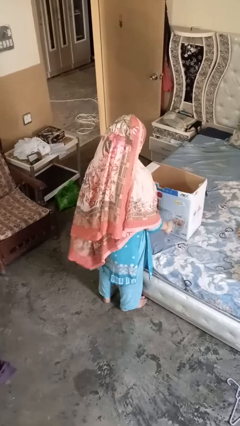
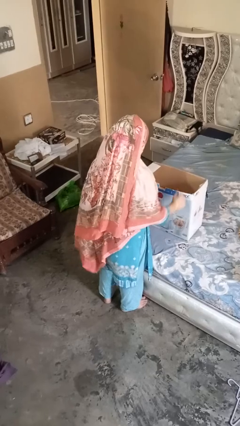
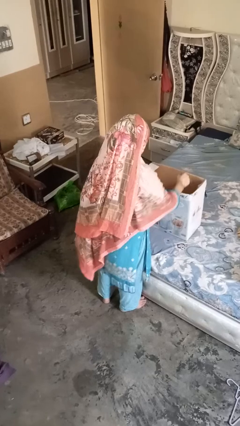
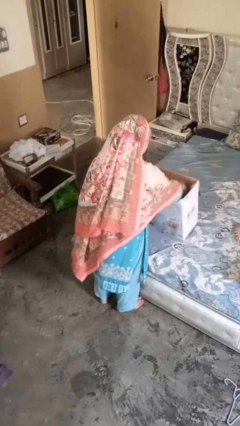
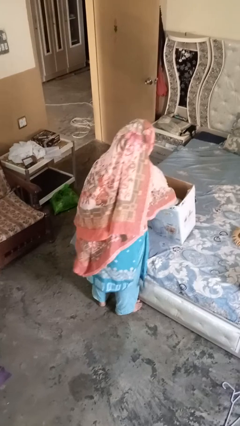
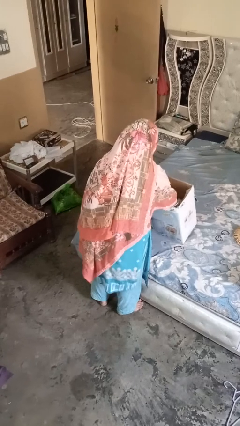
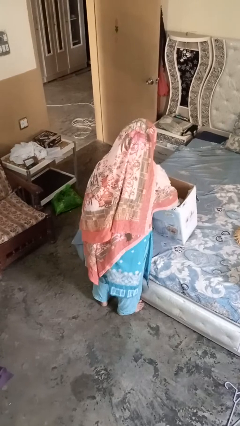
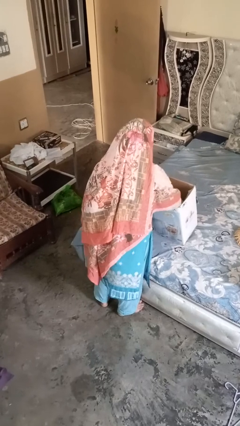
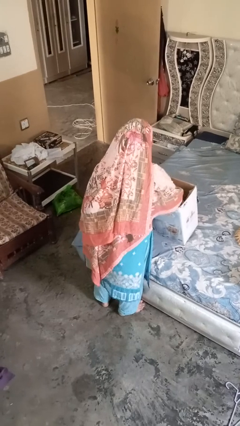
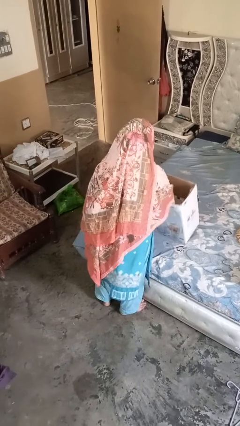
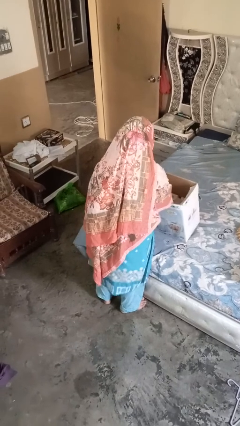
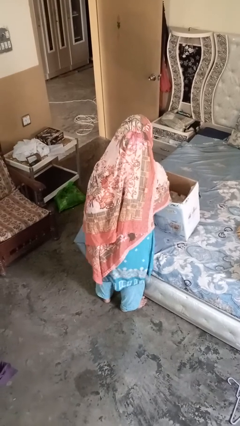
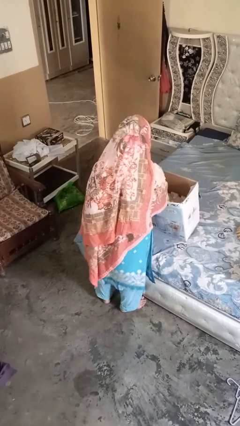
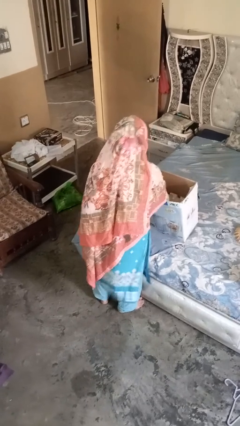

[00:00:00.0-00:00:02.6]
person searches in box

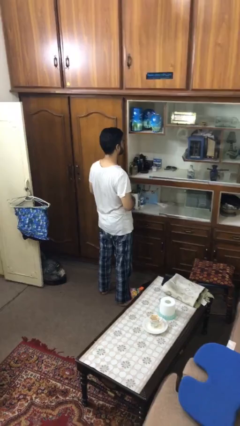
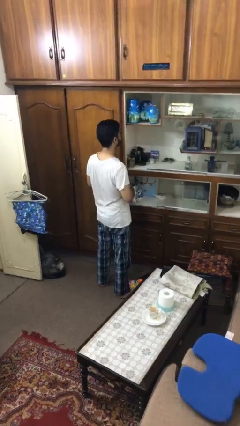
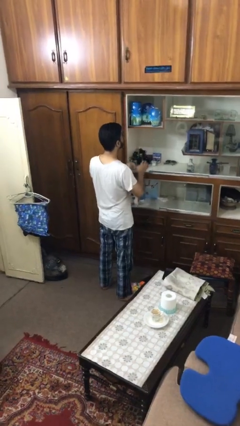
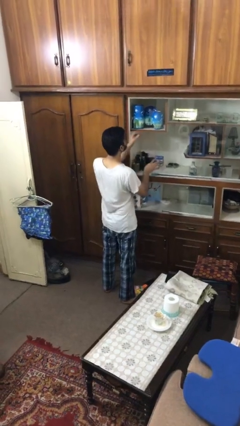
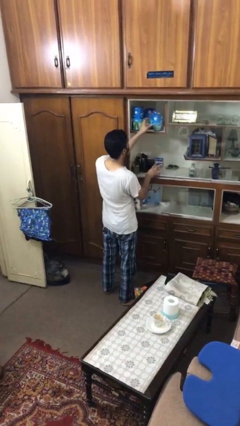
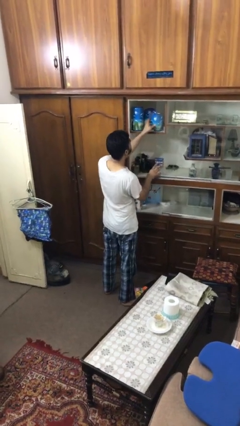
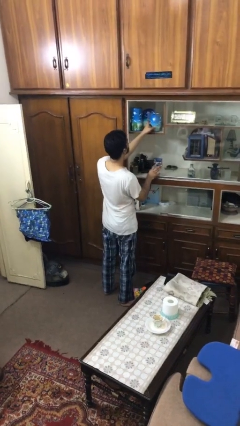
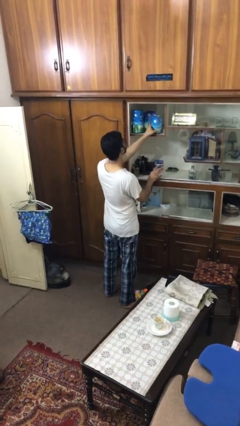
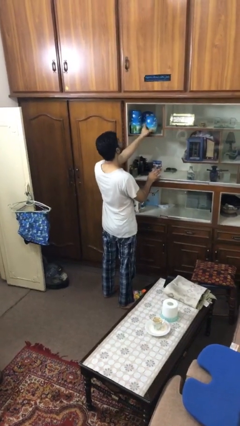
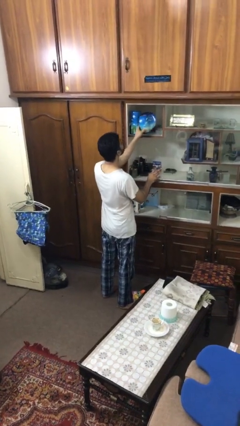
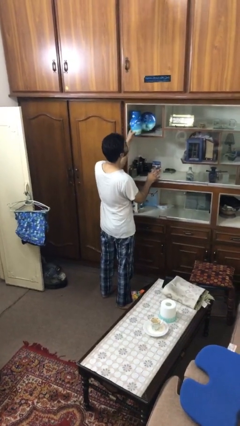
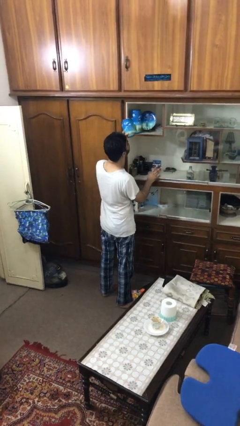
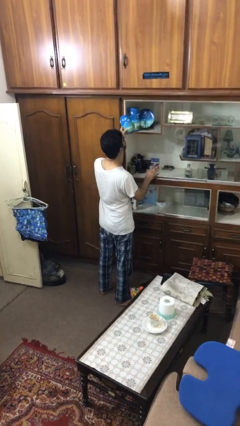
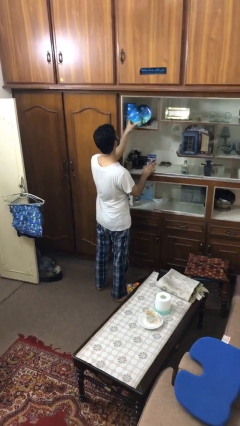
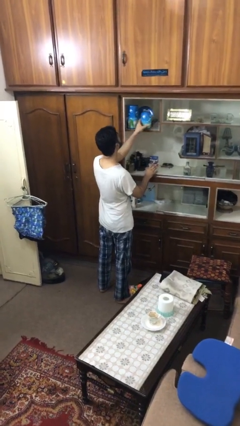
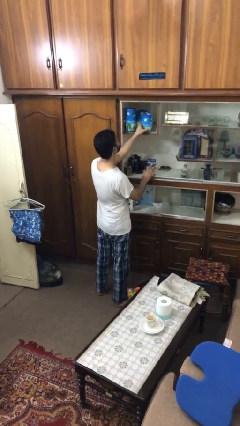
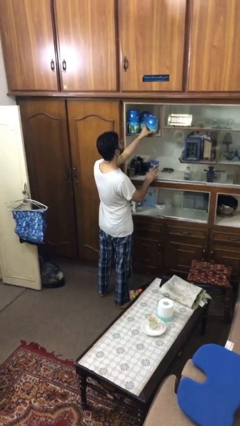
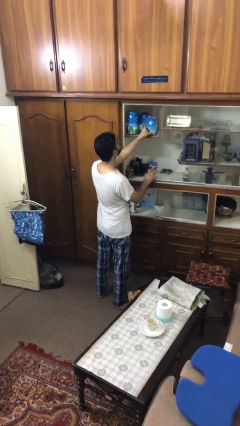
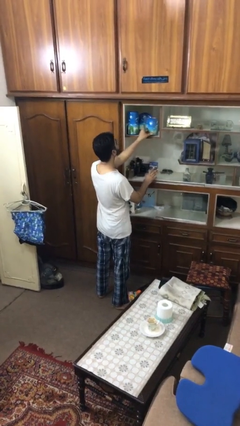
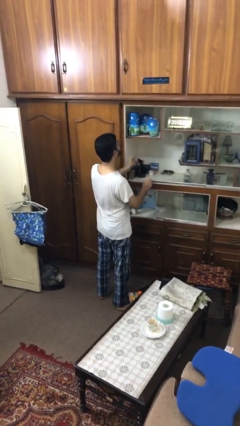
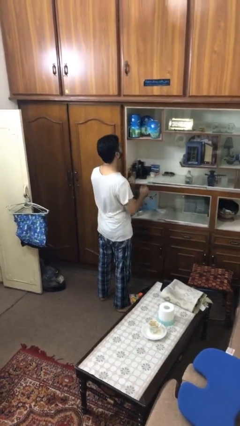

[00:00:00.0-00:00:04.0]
person searches in cabinet

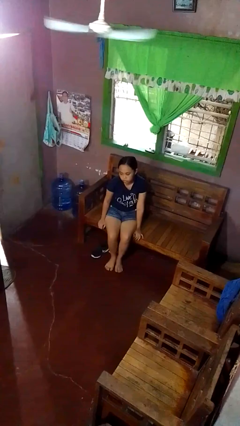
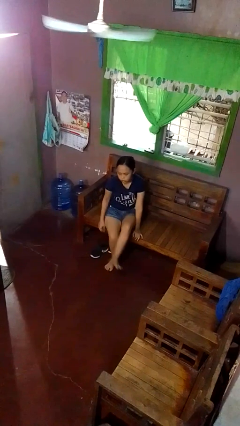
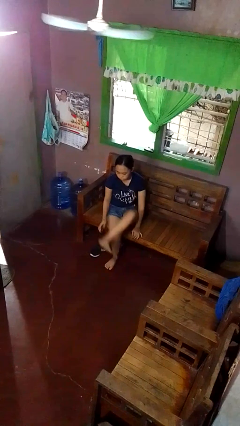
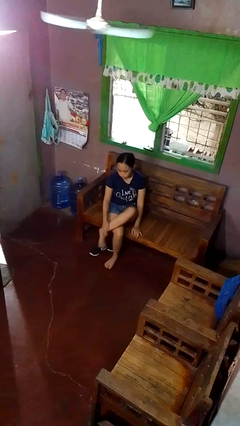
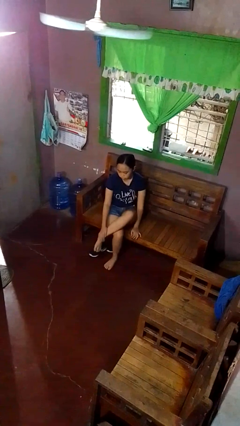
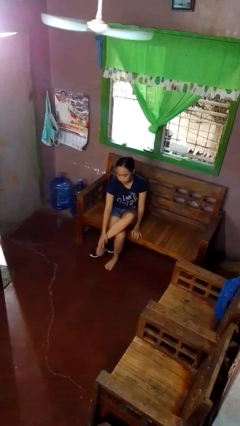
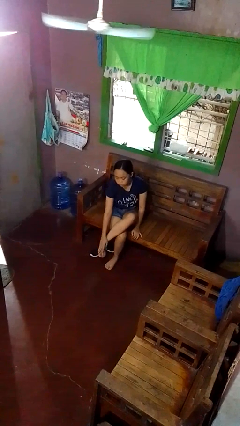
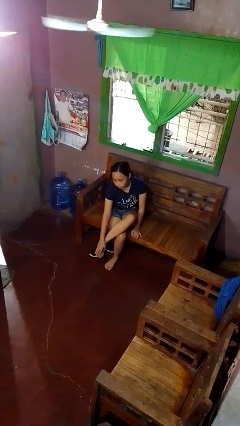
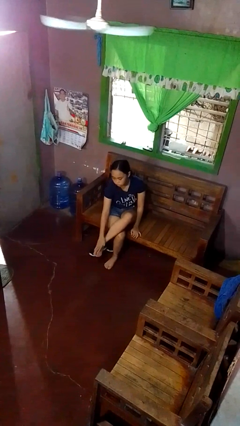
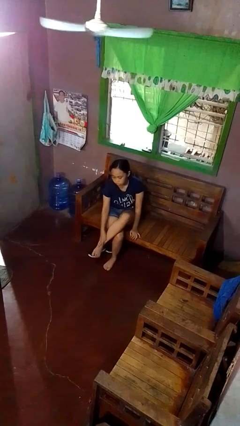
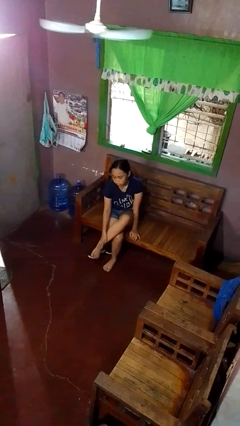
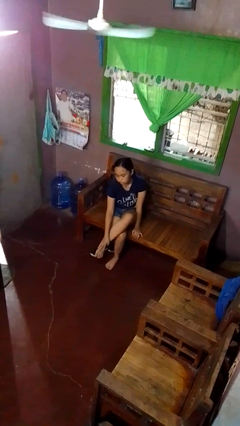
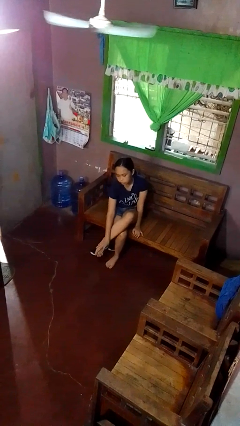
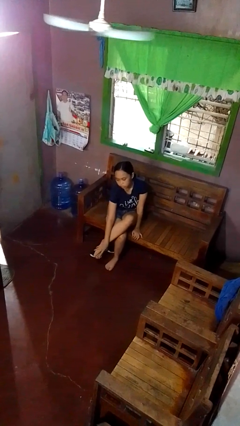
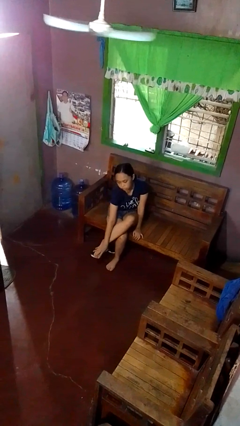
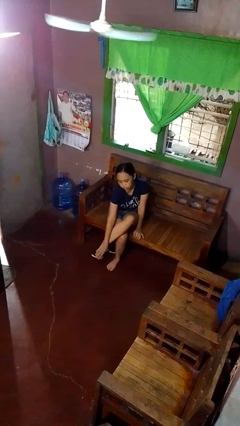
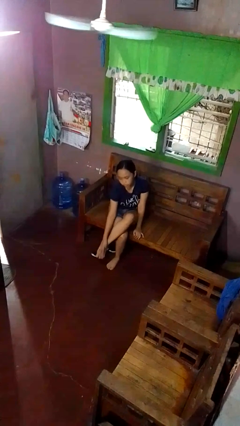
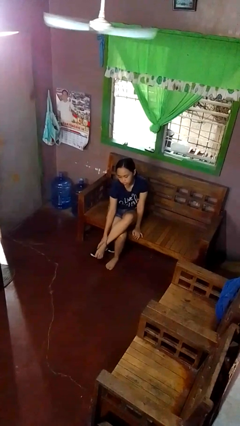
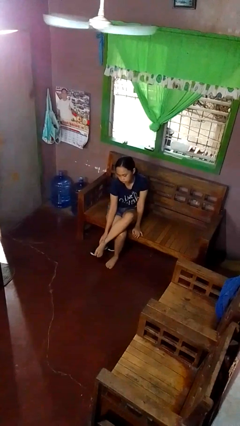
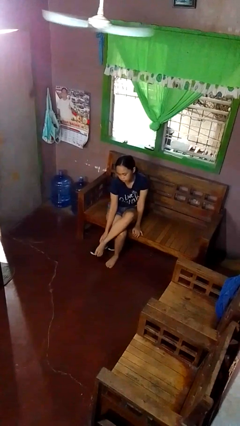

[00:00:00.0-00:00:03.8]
person rubs foot

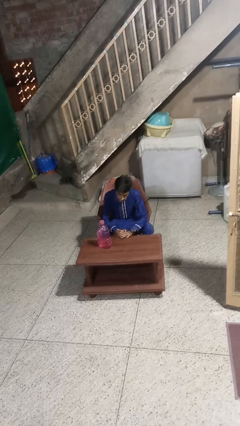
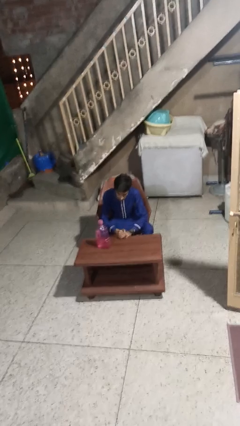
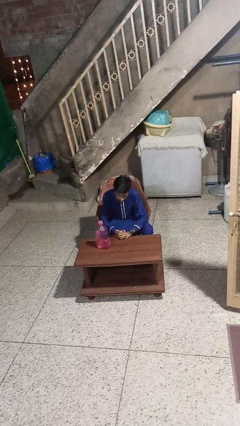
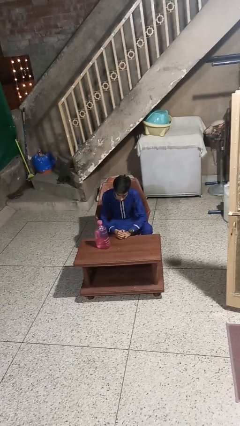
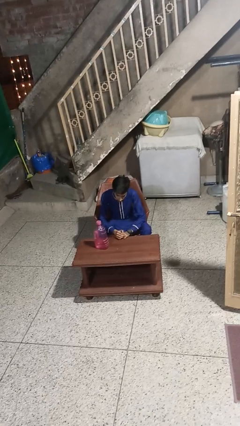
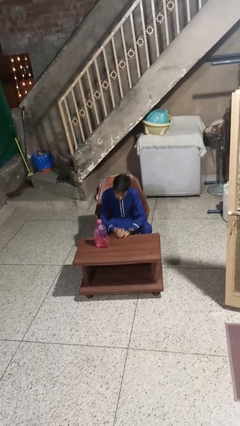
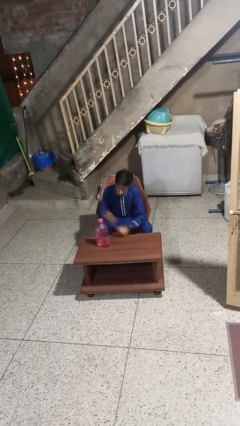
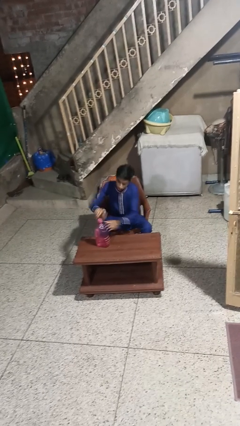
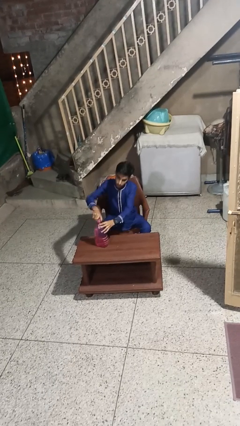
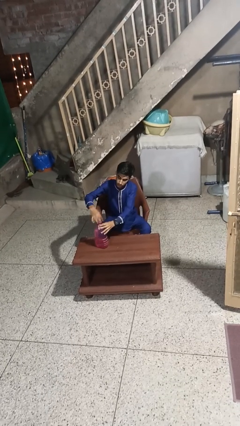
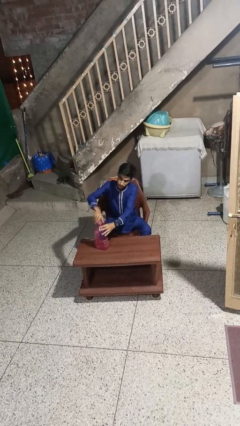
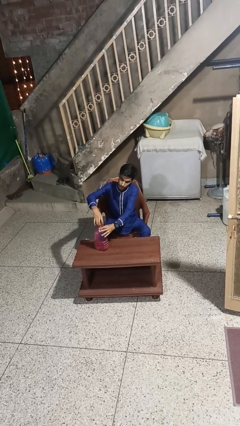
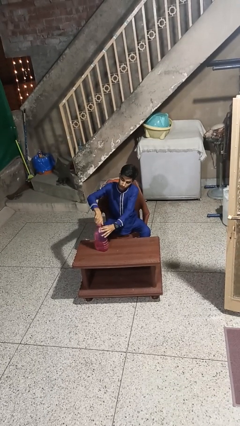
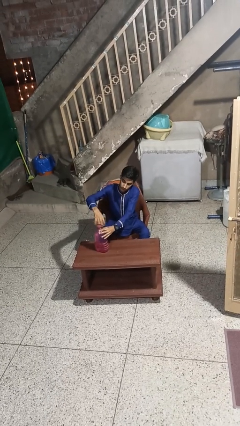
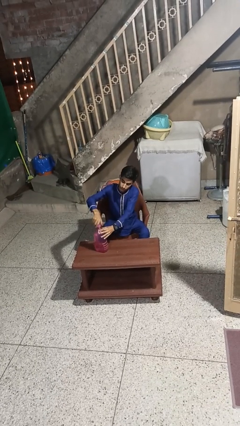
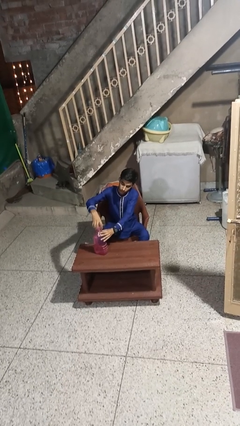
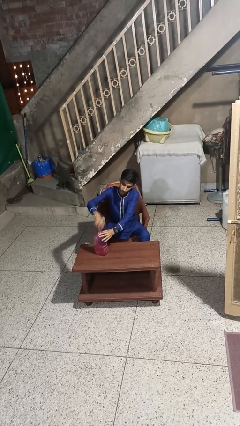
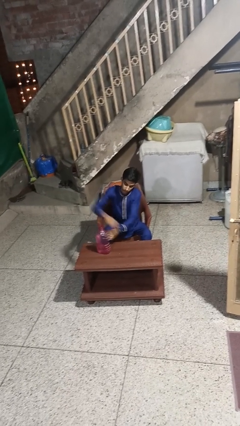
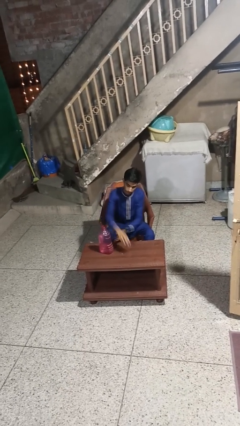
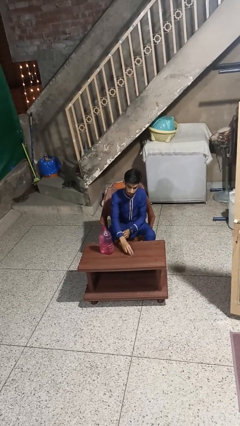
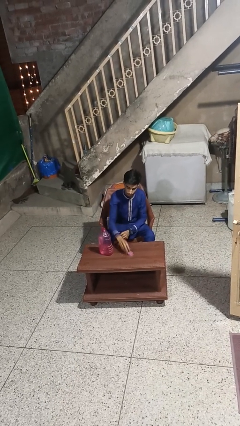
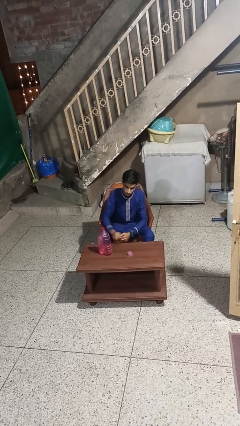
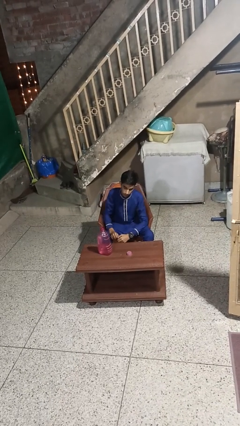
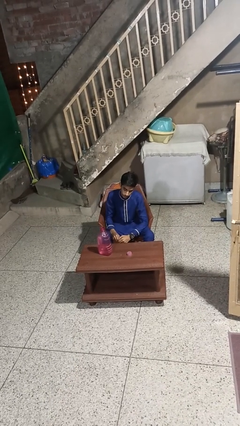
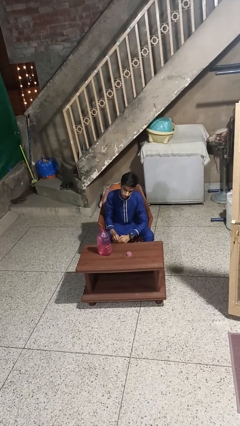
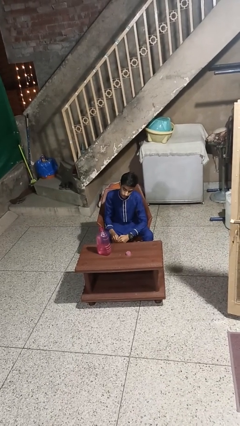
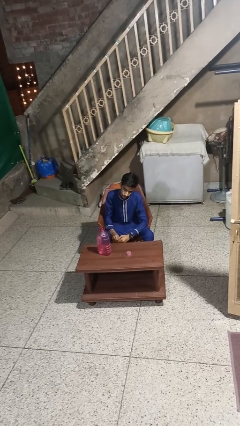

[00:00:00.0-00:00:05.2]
person unscrews lid from bottle

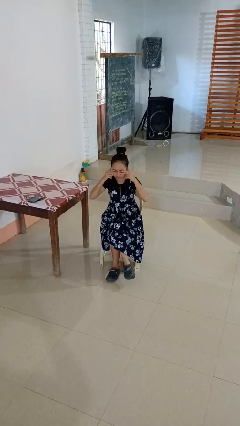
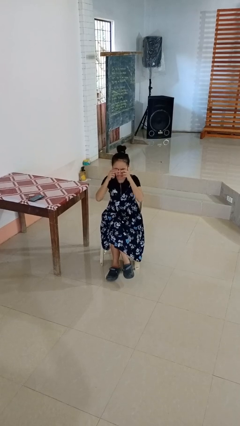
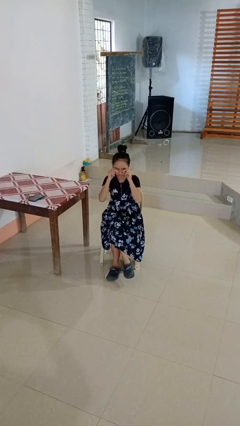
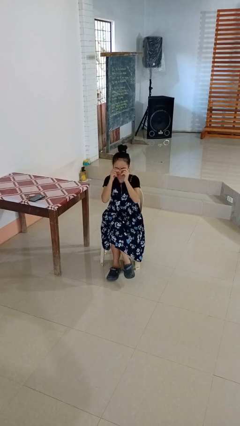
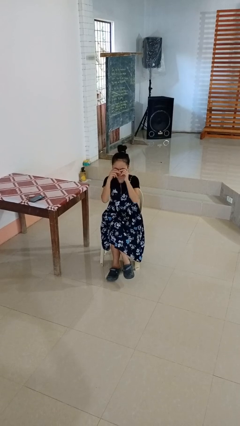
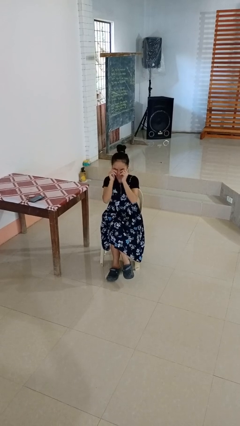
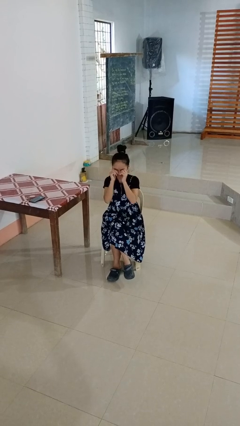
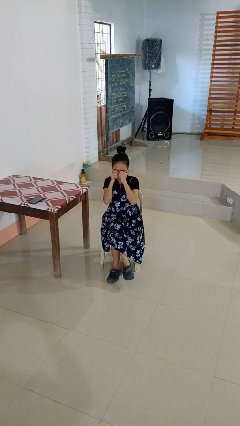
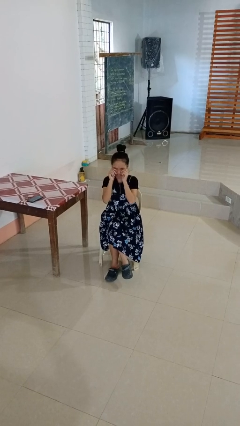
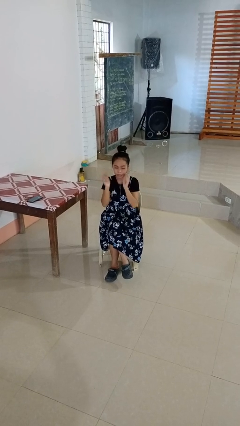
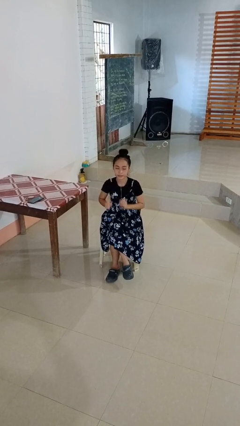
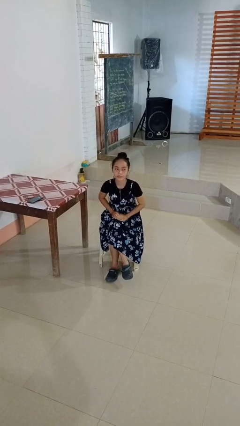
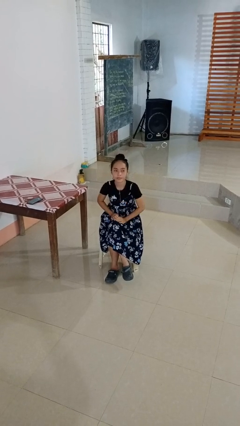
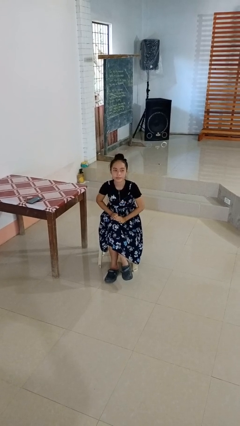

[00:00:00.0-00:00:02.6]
person rubs eyes
